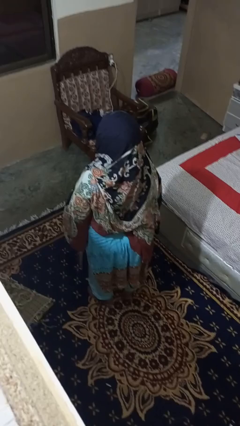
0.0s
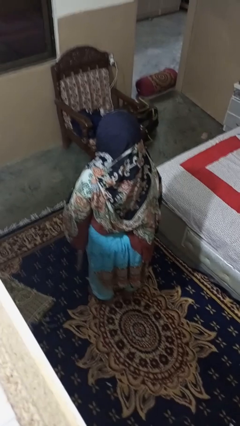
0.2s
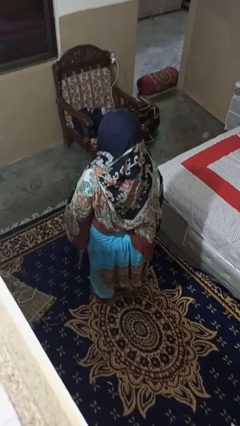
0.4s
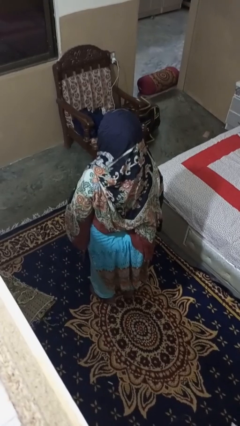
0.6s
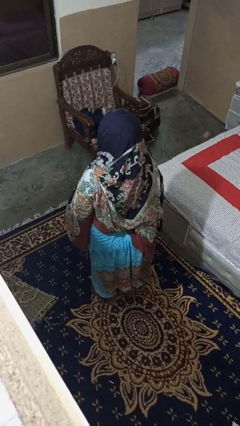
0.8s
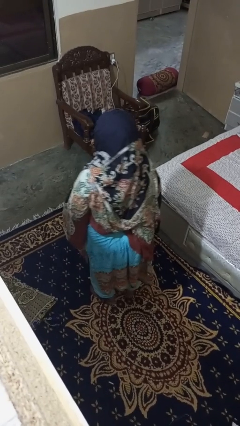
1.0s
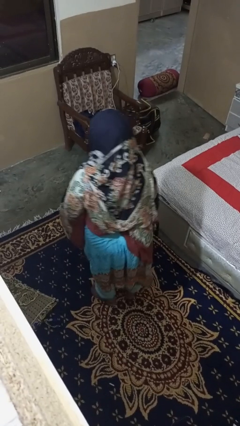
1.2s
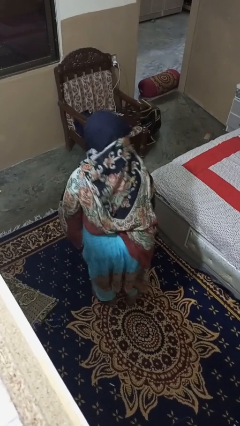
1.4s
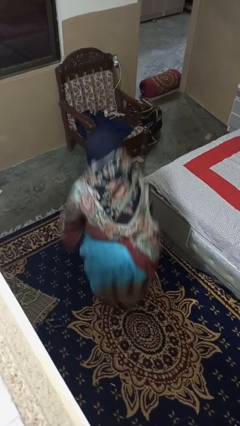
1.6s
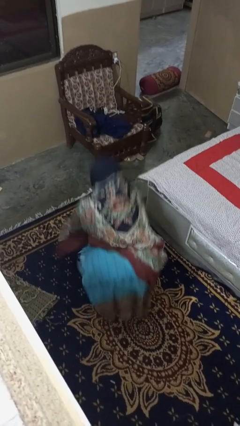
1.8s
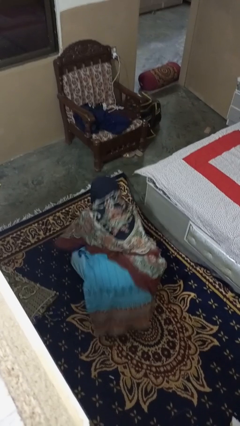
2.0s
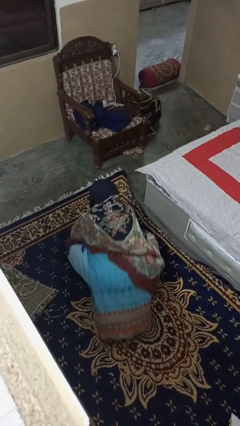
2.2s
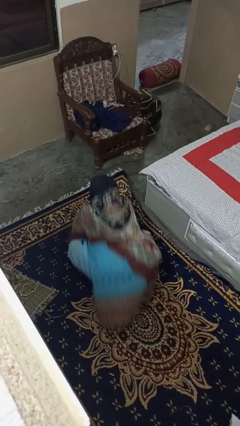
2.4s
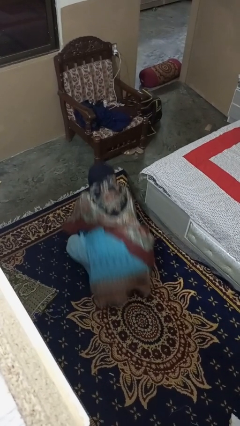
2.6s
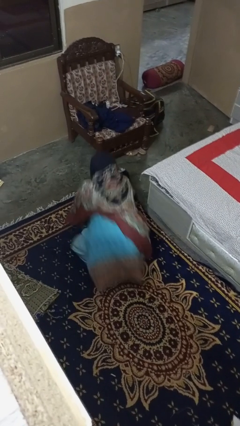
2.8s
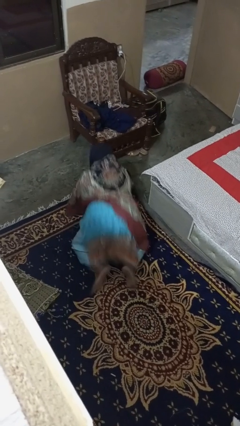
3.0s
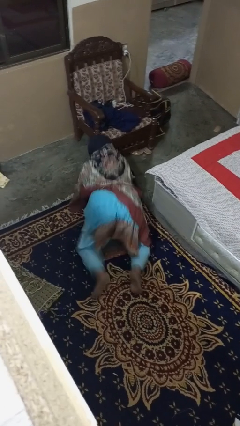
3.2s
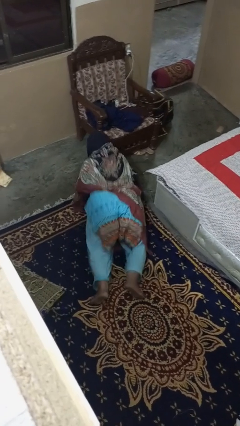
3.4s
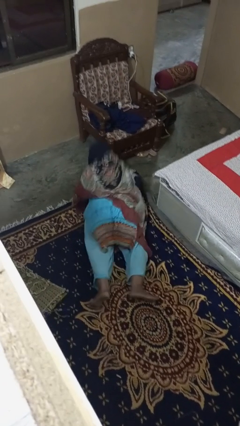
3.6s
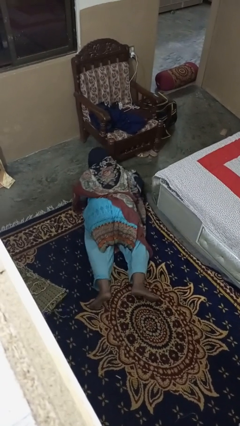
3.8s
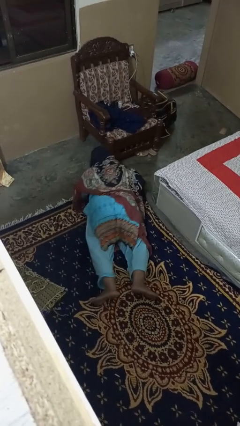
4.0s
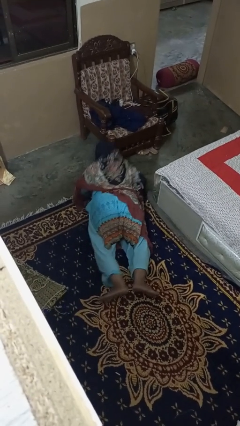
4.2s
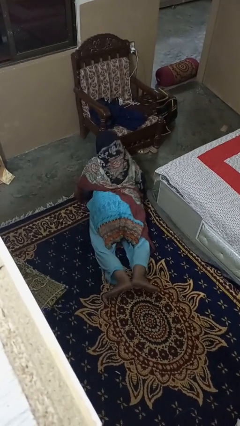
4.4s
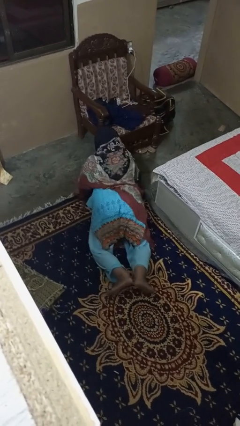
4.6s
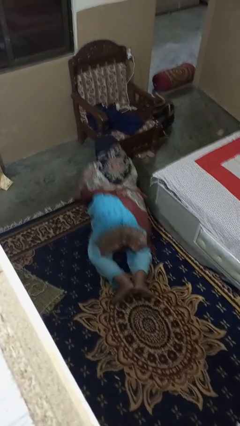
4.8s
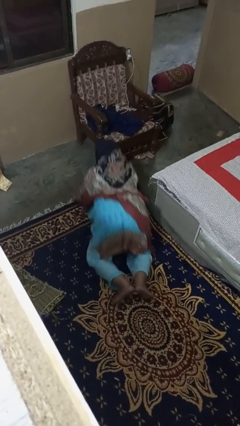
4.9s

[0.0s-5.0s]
person exercises with pushup

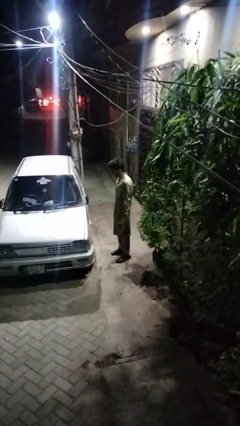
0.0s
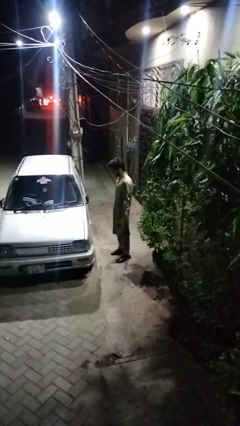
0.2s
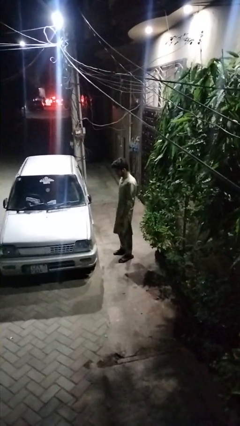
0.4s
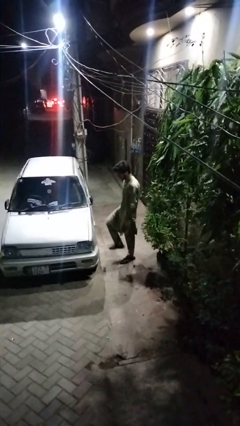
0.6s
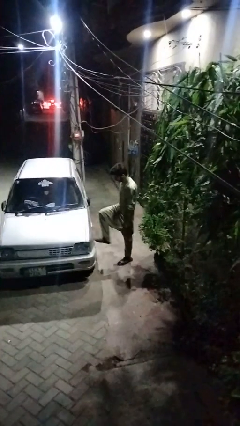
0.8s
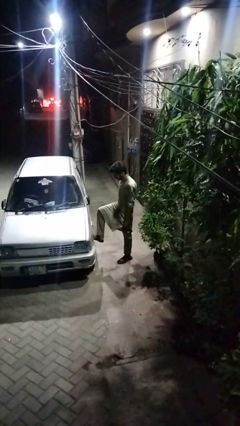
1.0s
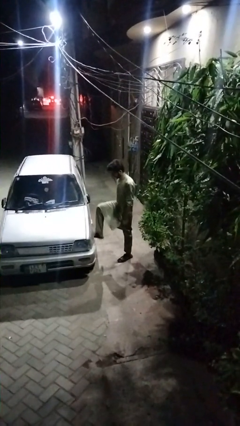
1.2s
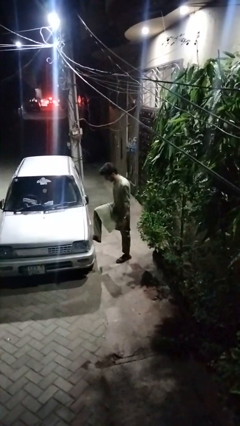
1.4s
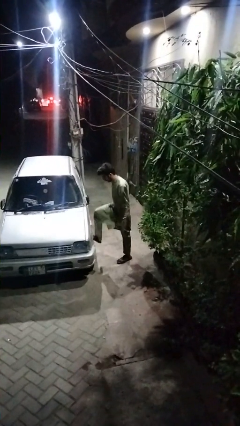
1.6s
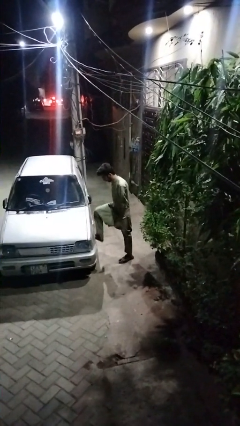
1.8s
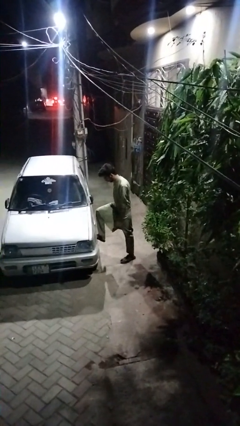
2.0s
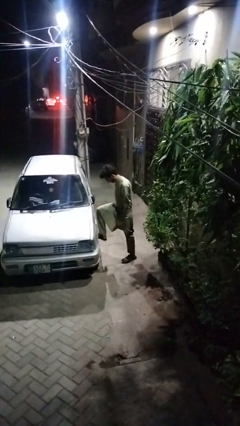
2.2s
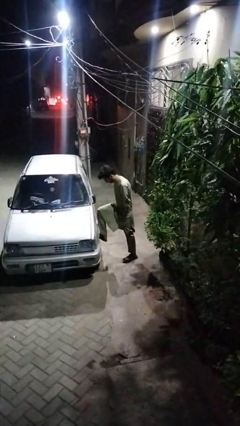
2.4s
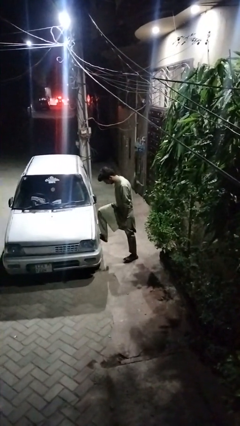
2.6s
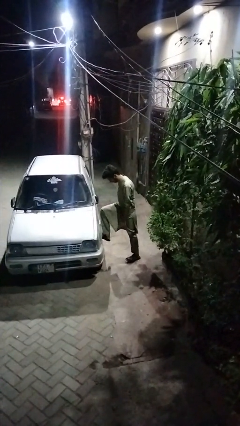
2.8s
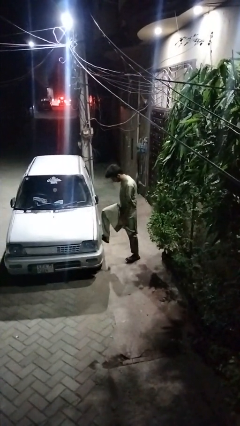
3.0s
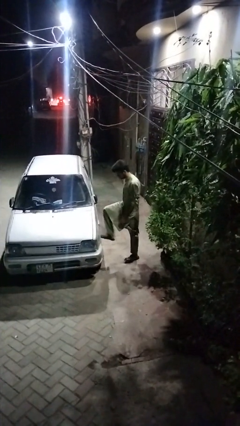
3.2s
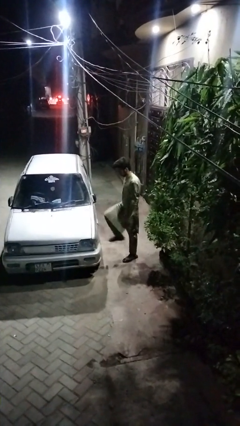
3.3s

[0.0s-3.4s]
person kicks car tires

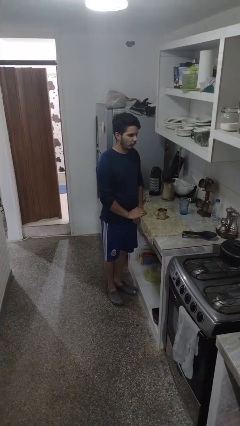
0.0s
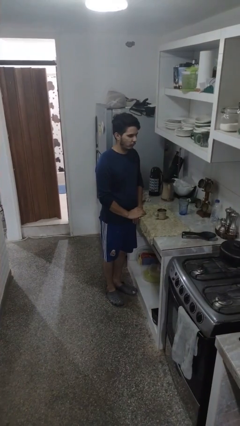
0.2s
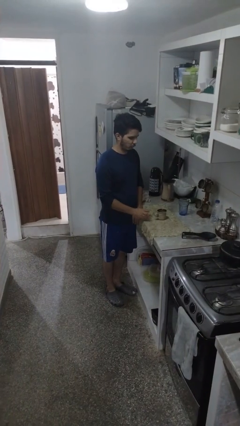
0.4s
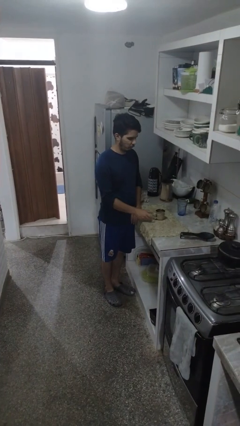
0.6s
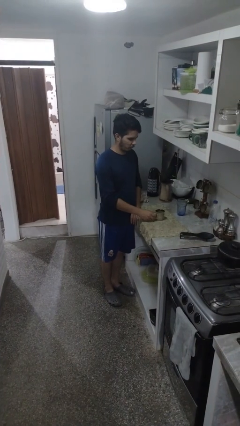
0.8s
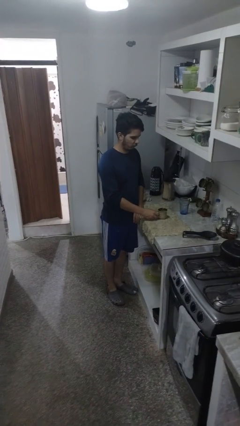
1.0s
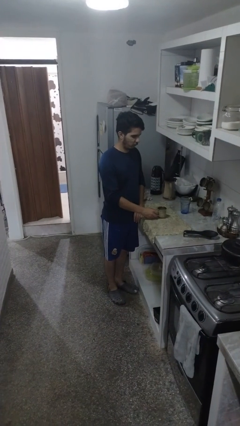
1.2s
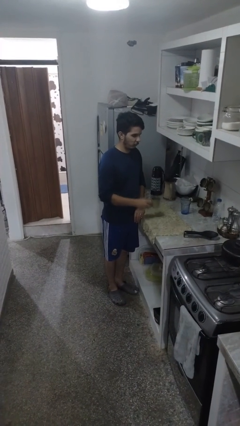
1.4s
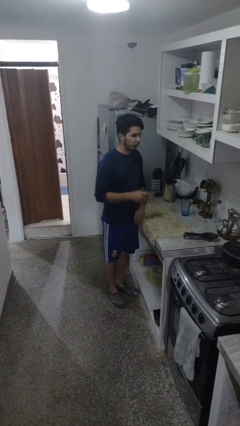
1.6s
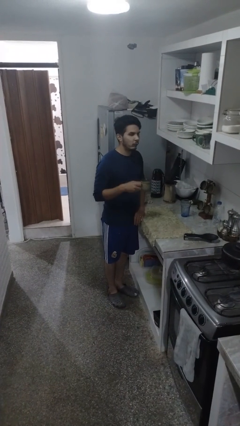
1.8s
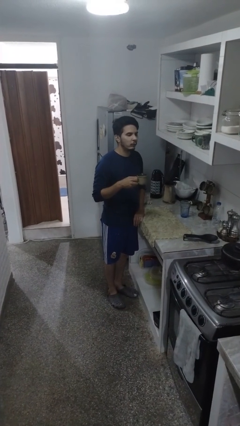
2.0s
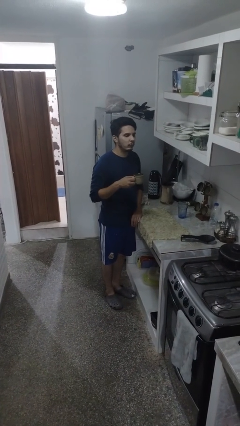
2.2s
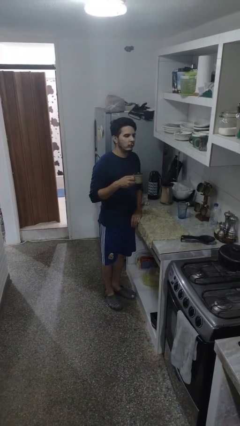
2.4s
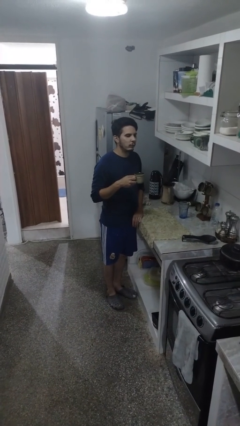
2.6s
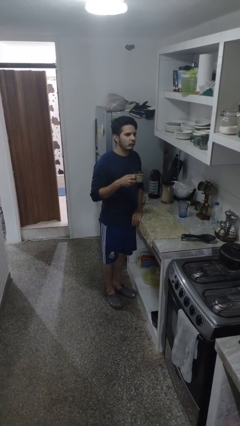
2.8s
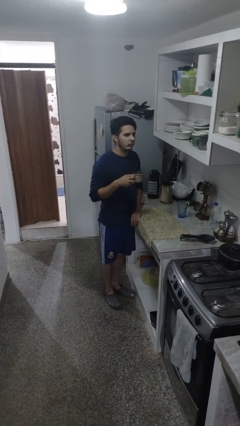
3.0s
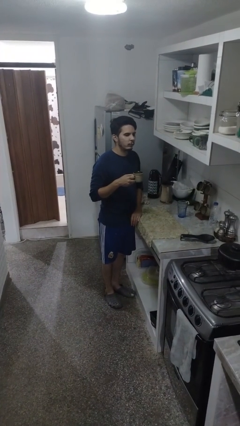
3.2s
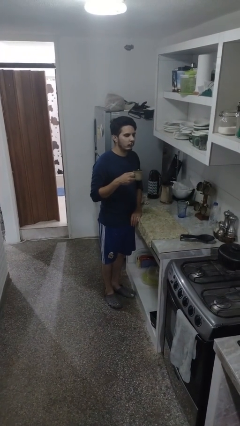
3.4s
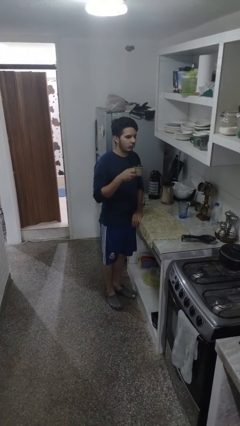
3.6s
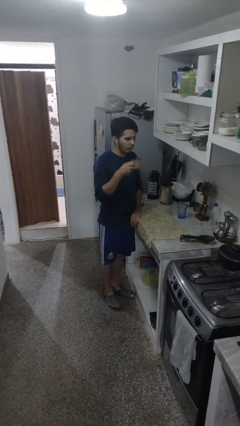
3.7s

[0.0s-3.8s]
person picks up object from table

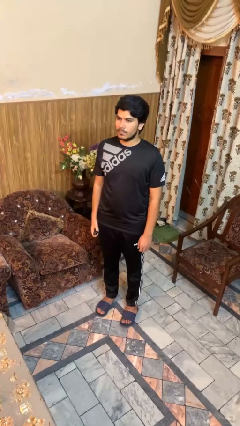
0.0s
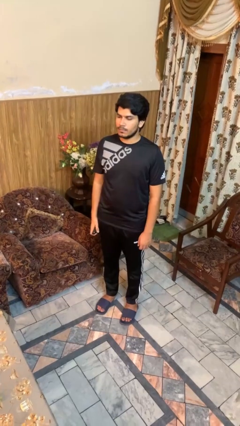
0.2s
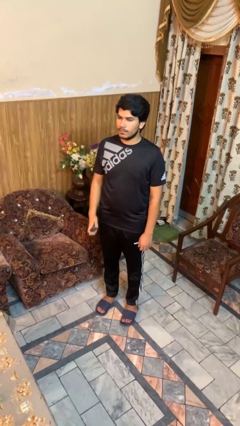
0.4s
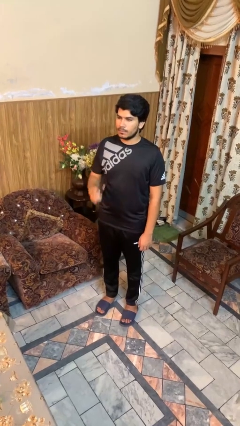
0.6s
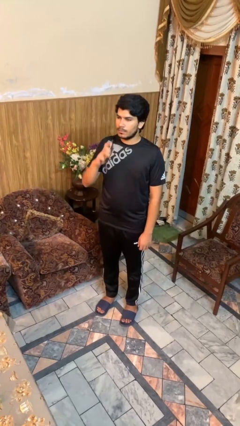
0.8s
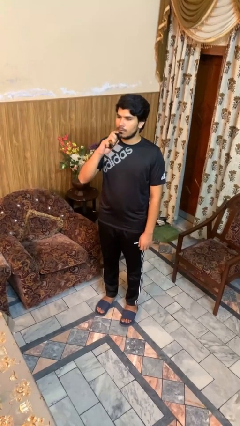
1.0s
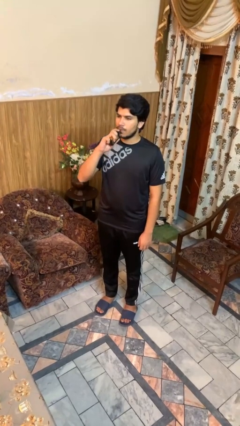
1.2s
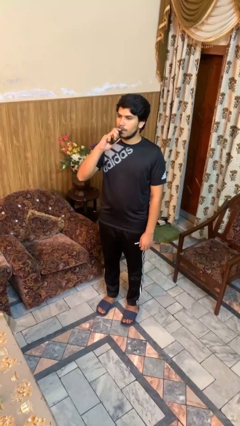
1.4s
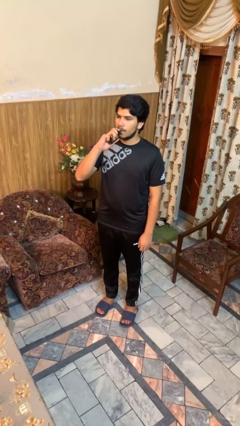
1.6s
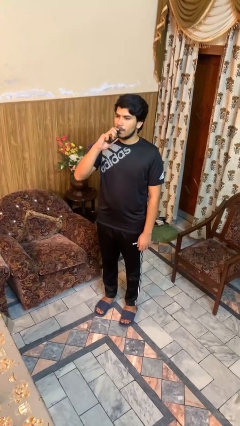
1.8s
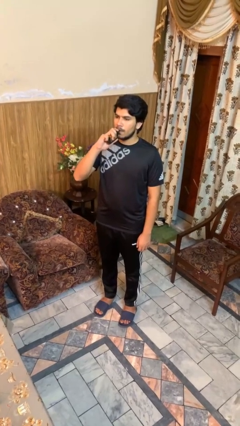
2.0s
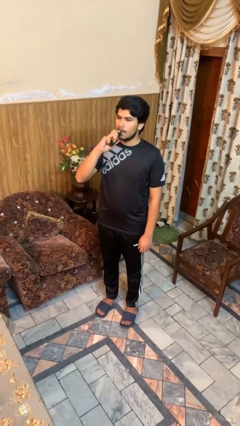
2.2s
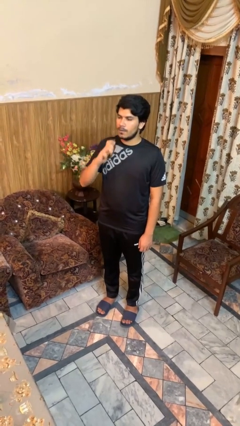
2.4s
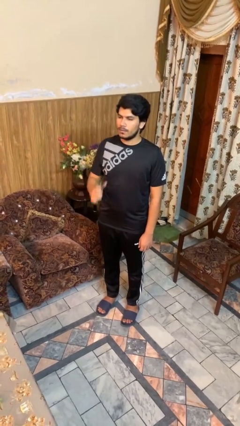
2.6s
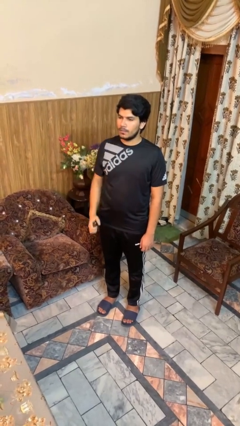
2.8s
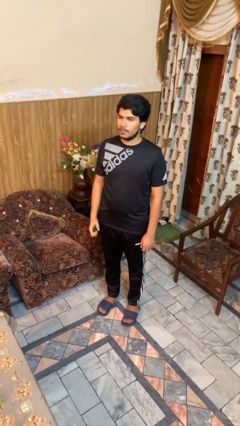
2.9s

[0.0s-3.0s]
person vapes

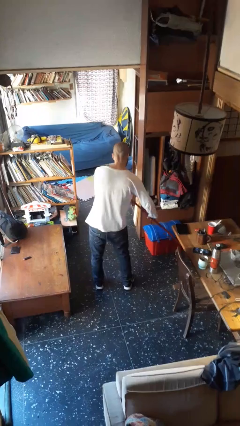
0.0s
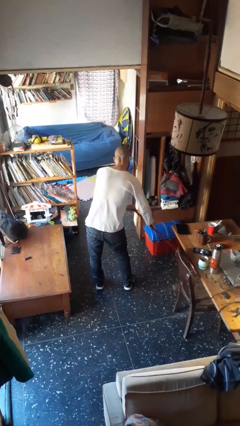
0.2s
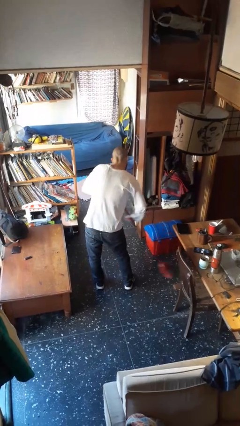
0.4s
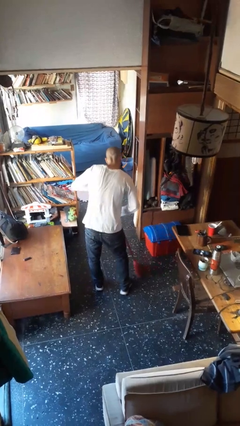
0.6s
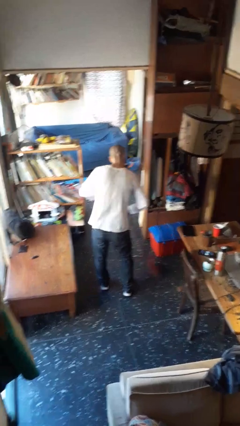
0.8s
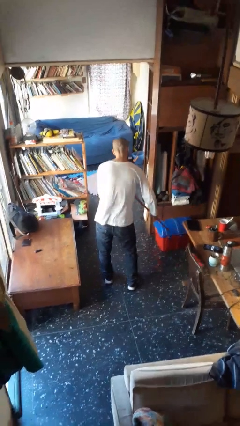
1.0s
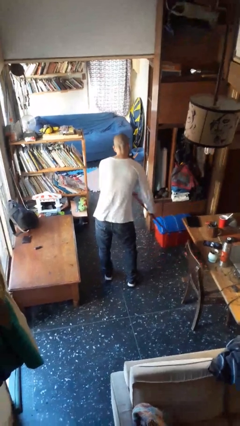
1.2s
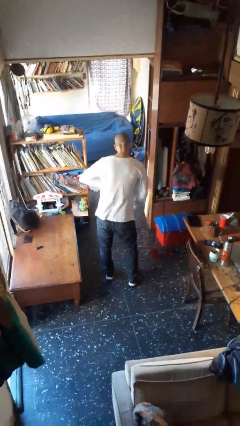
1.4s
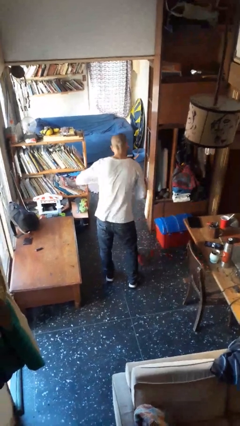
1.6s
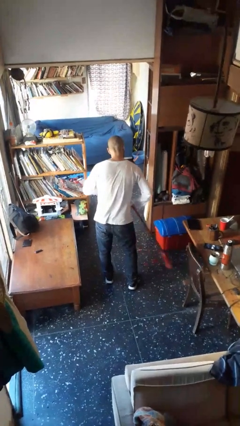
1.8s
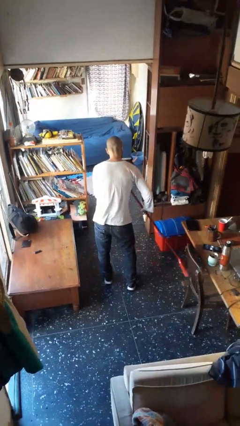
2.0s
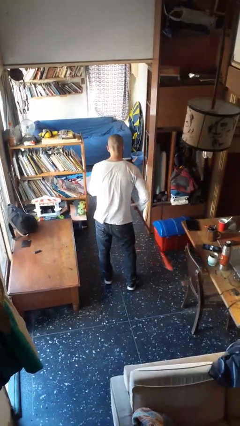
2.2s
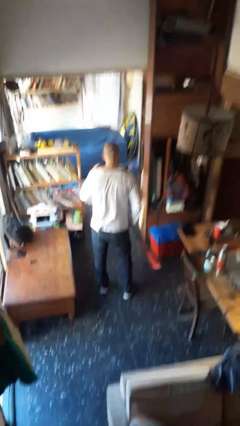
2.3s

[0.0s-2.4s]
person sweeps floor
